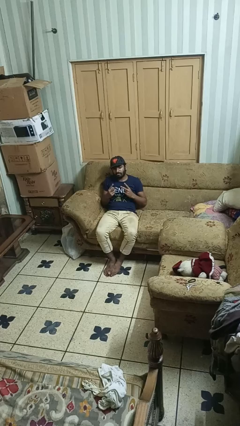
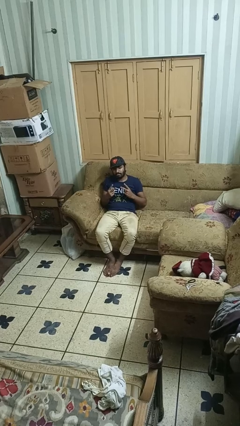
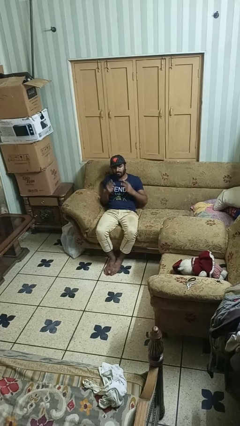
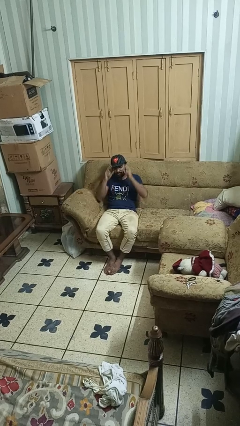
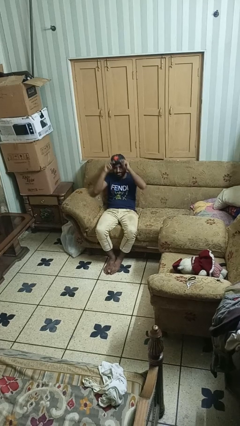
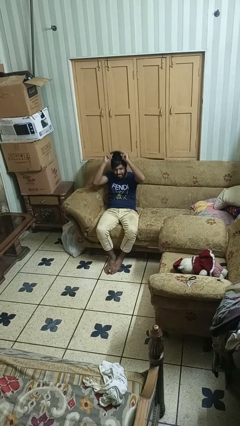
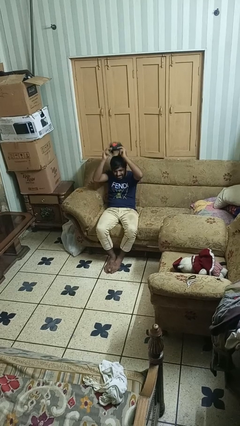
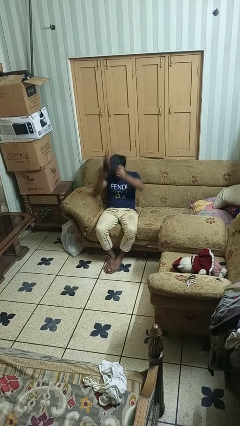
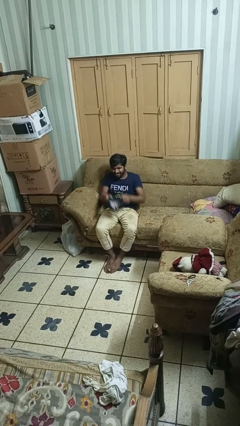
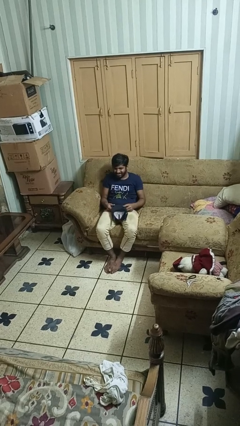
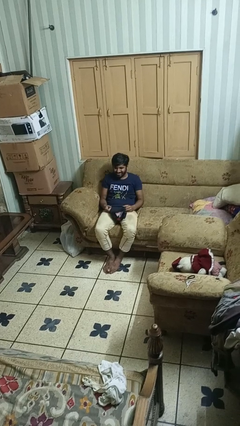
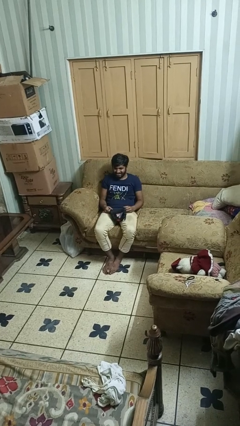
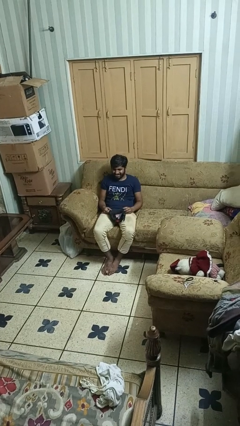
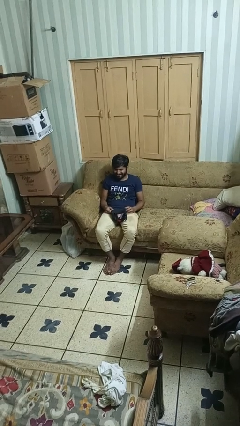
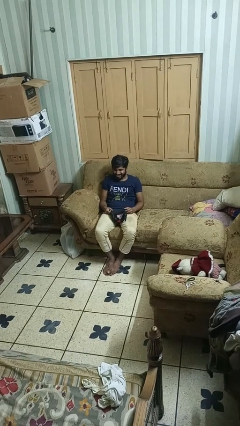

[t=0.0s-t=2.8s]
person takes off hat

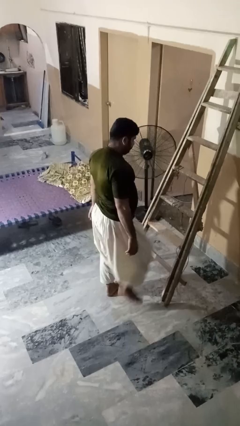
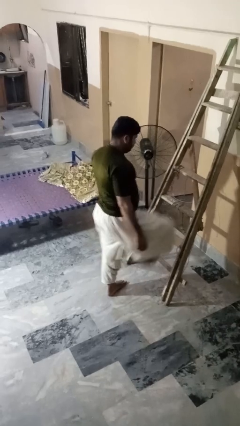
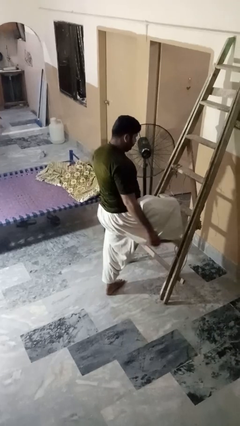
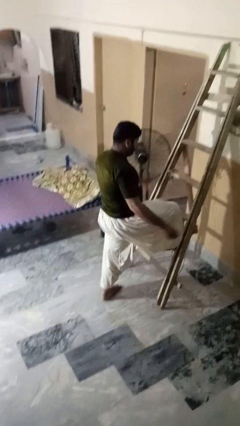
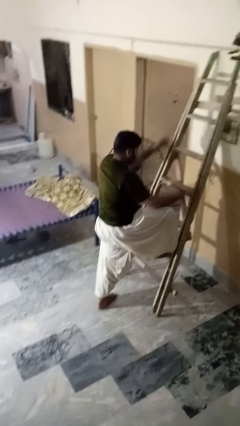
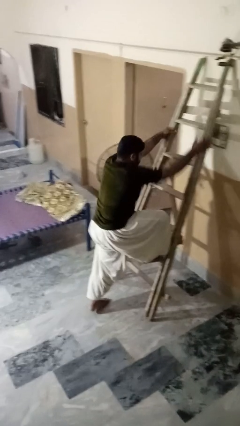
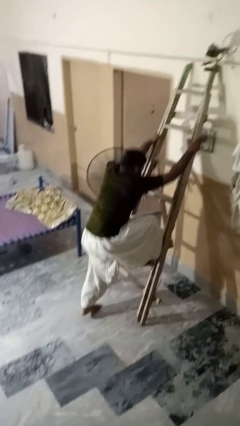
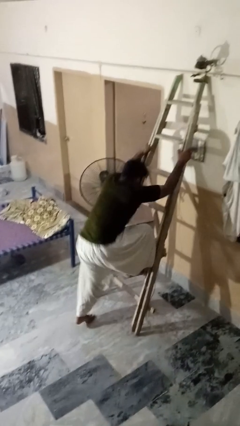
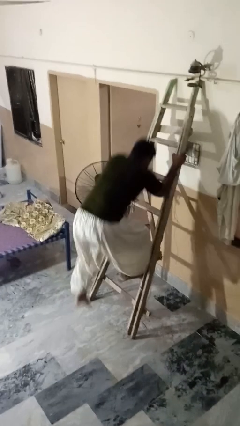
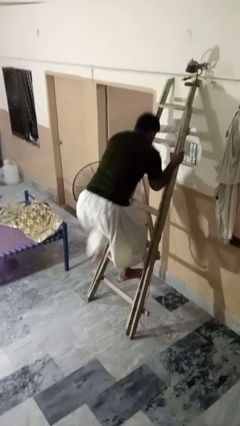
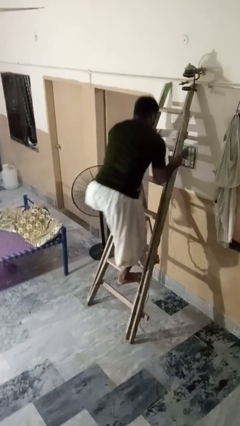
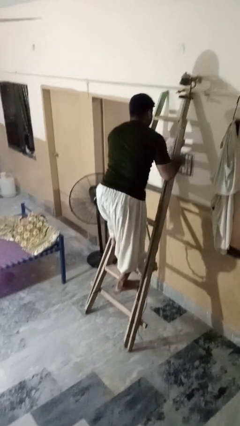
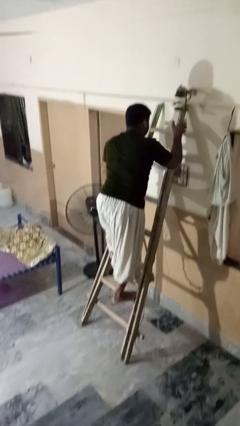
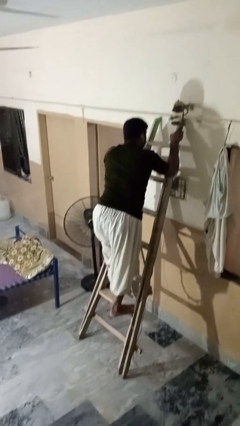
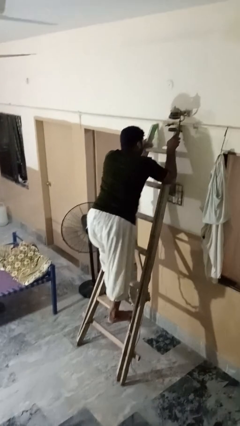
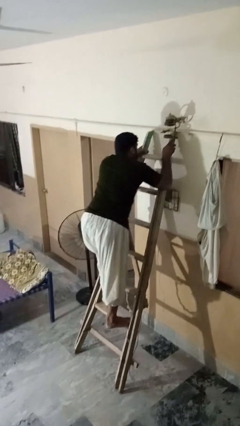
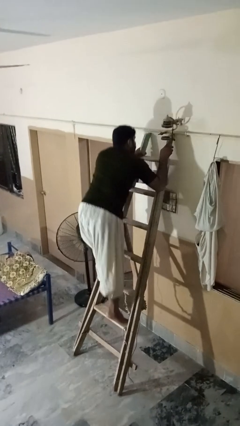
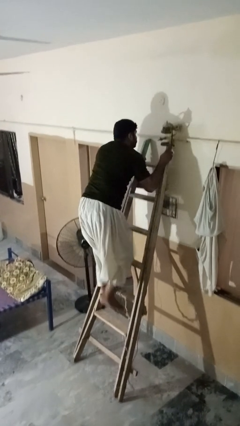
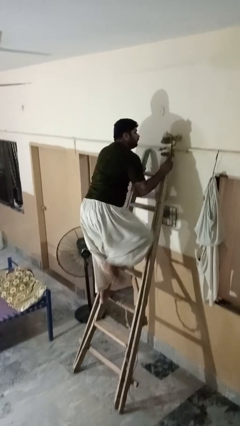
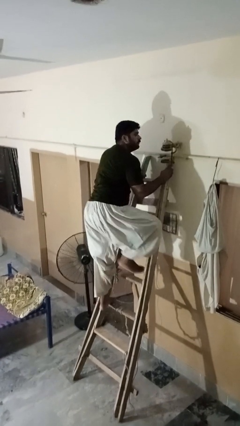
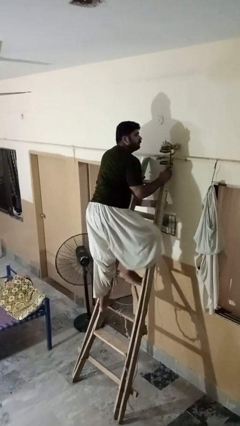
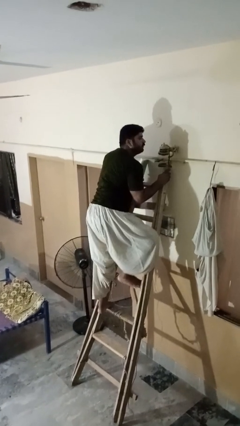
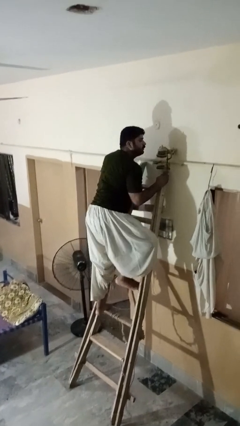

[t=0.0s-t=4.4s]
person climbs up ladder

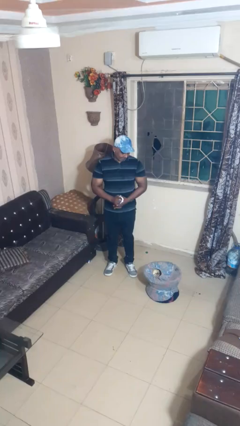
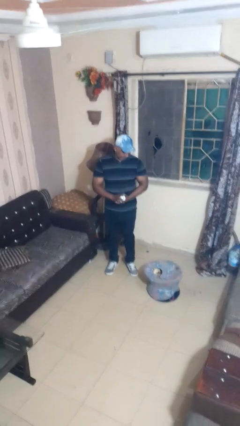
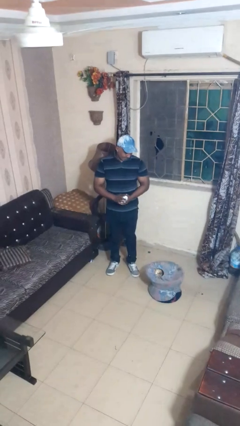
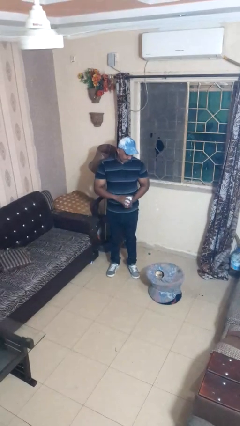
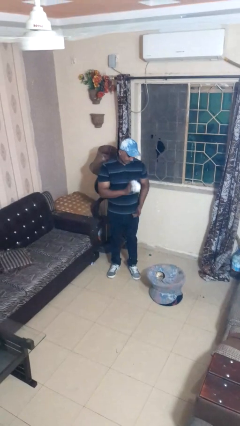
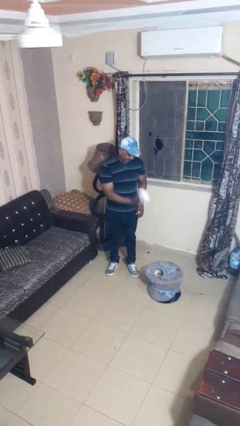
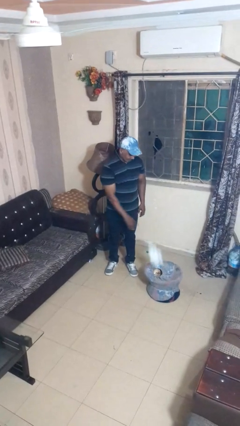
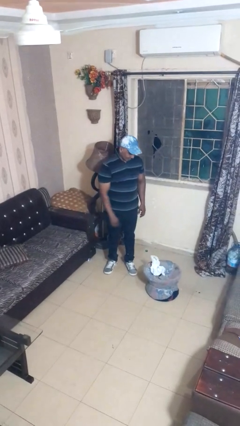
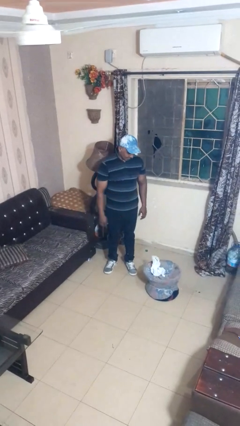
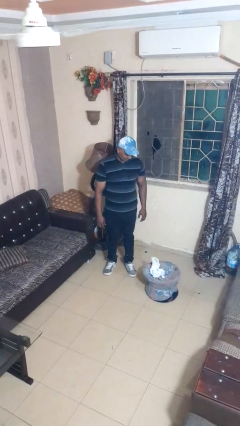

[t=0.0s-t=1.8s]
person puts object into basket

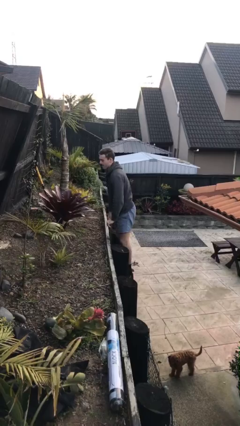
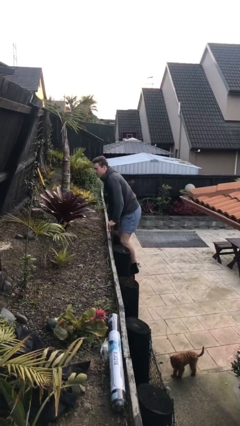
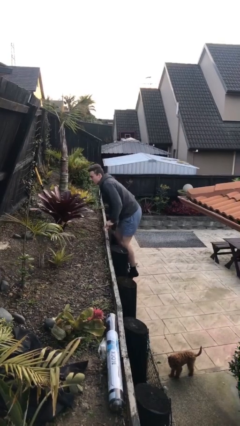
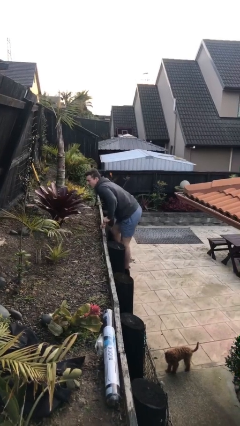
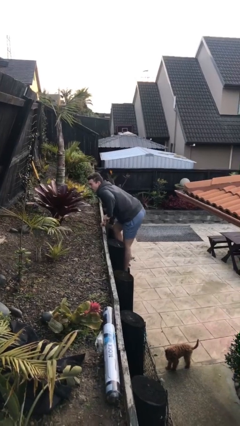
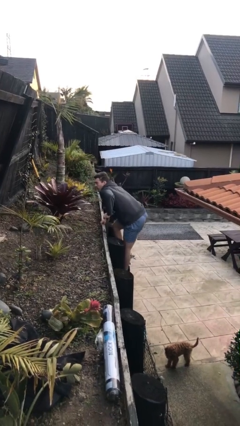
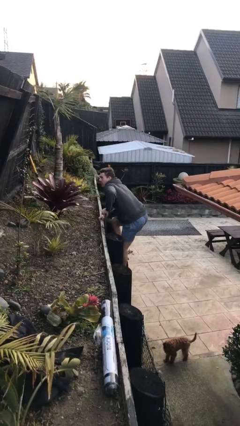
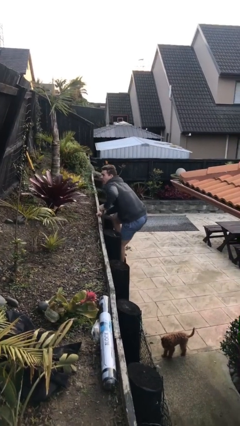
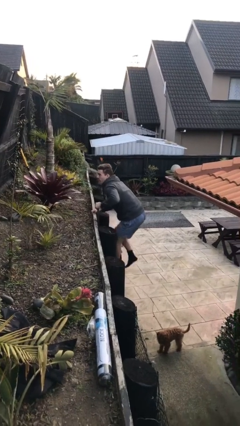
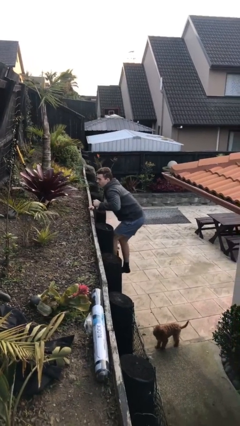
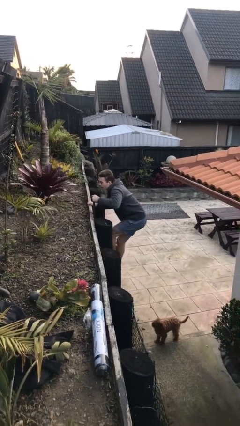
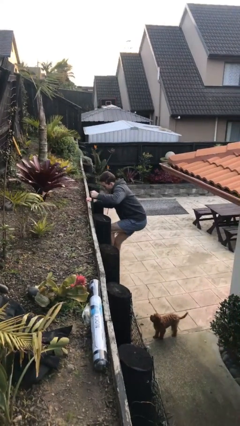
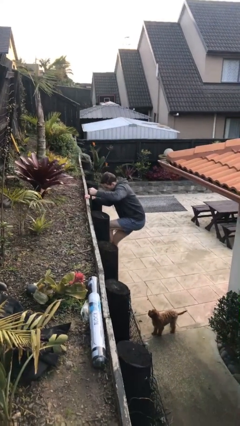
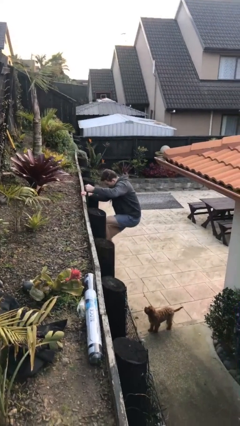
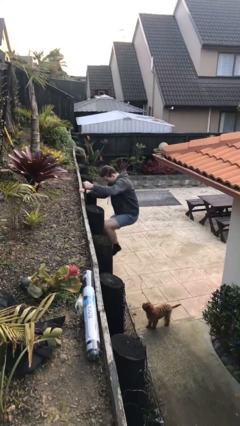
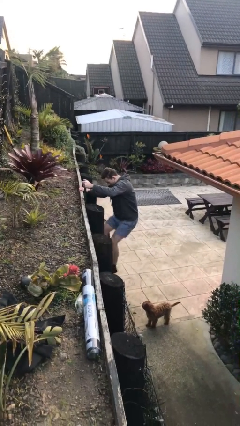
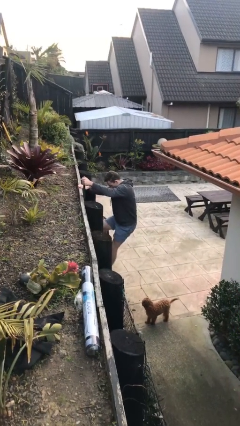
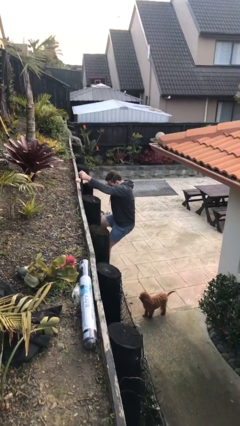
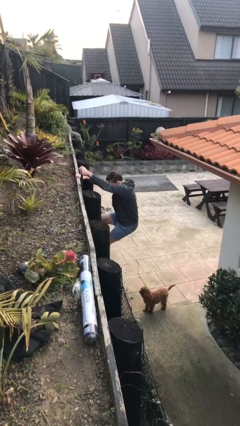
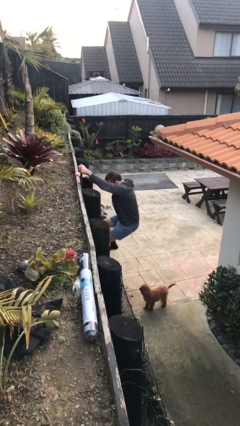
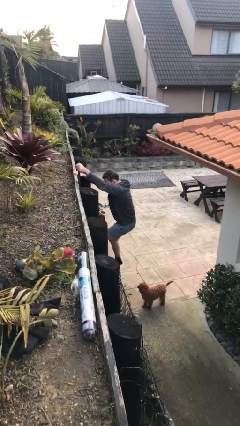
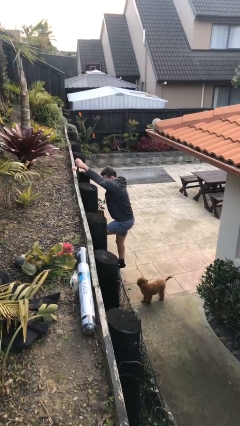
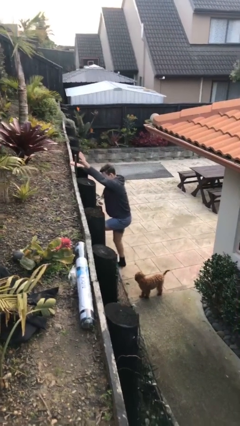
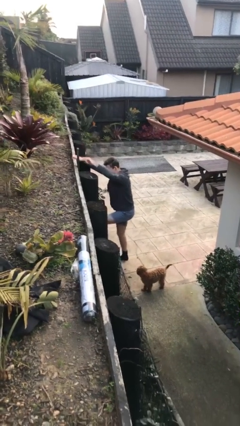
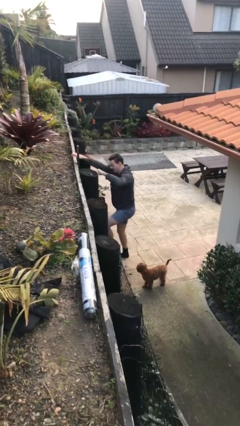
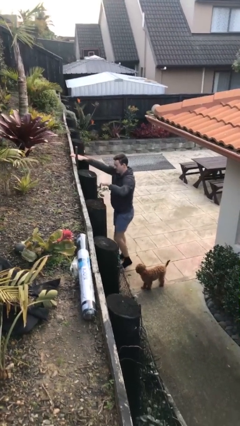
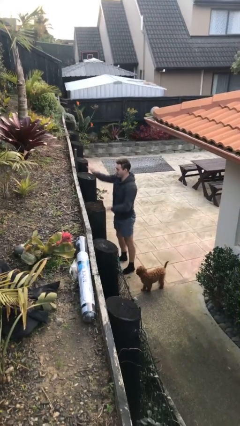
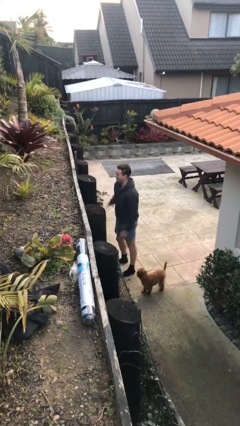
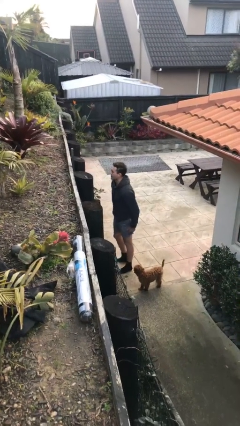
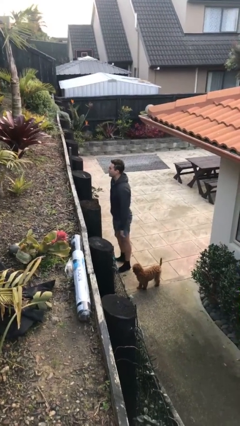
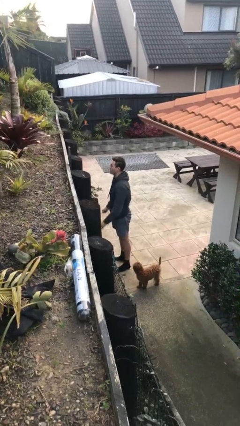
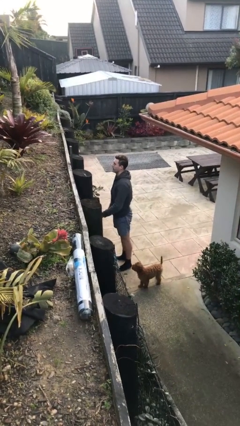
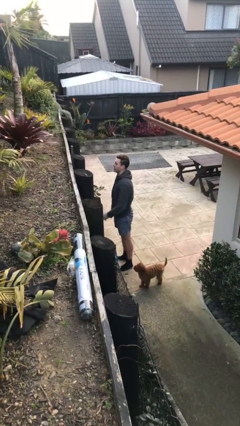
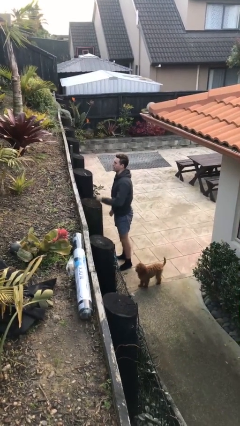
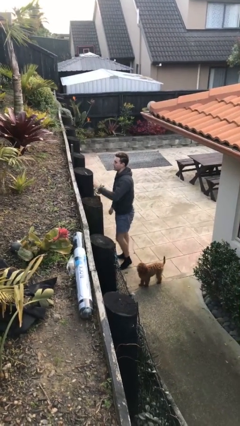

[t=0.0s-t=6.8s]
person climbs down ladder

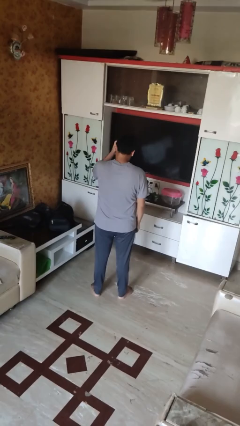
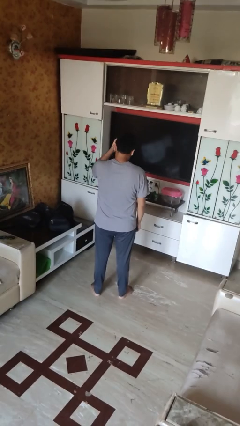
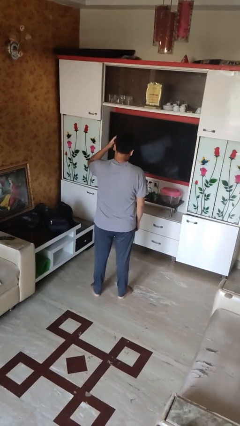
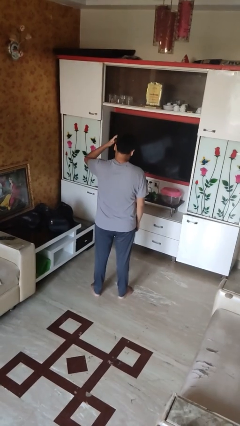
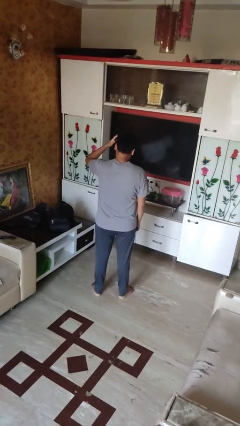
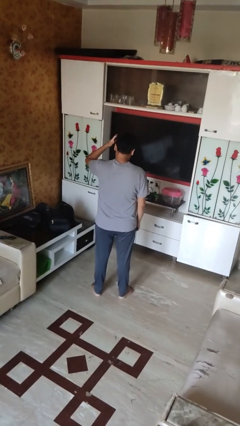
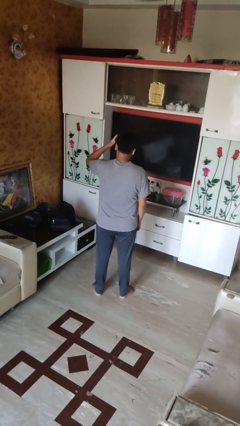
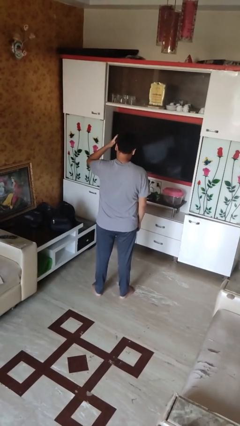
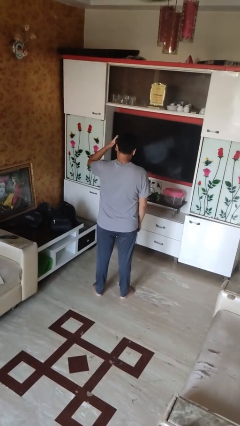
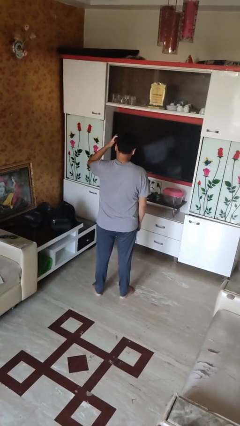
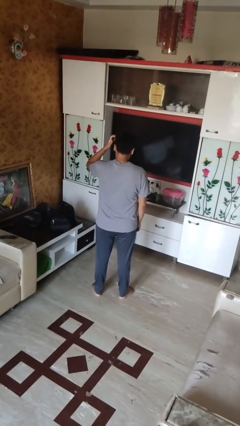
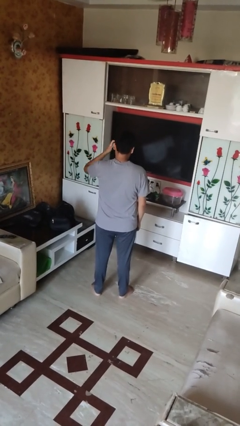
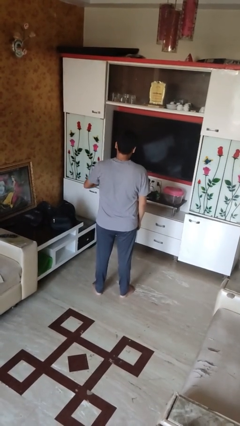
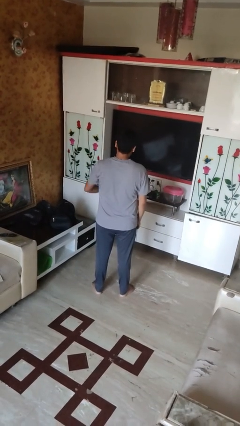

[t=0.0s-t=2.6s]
person scratches face
